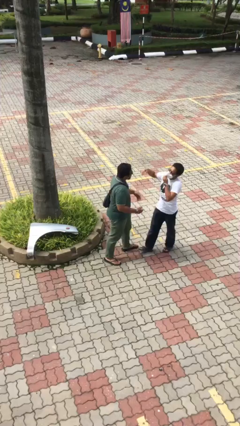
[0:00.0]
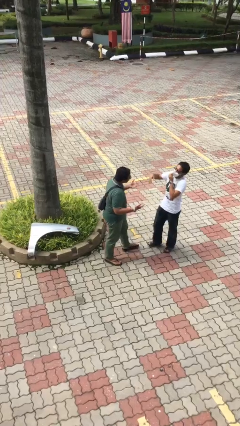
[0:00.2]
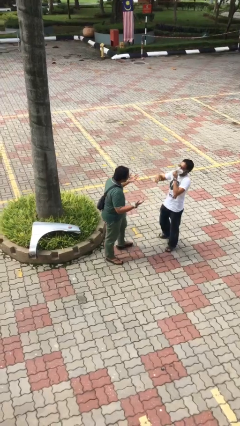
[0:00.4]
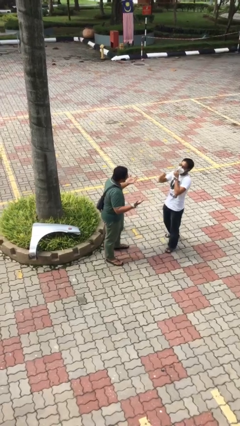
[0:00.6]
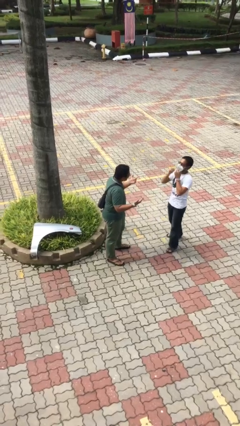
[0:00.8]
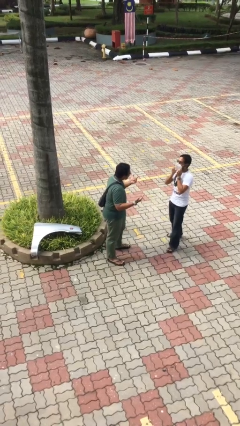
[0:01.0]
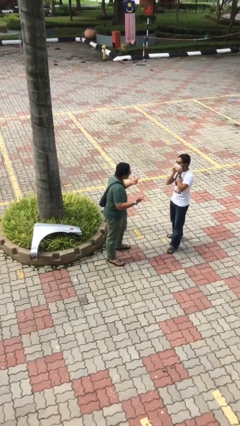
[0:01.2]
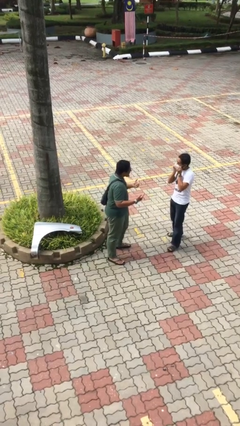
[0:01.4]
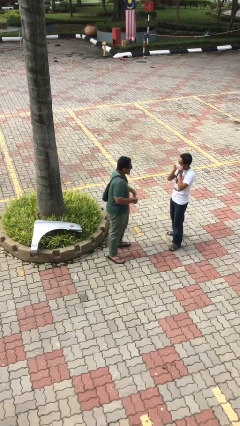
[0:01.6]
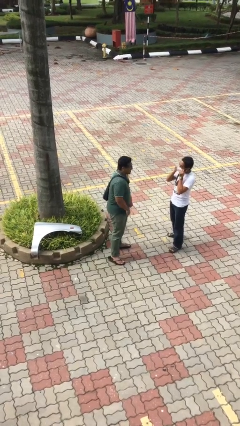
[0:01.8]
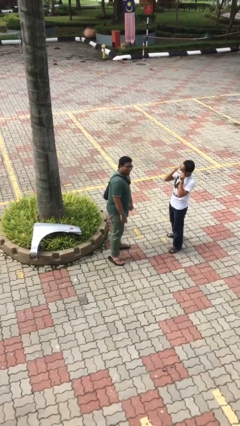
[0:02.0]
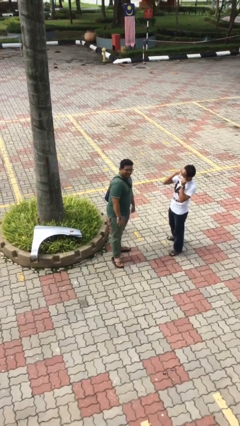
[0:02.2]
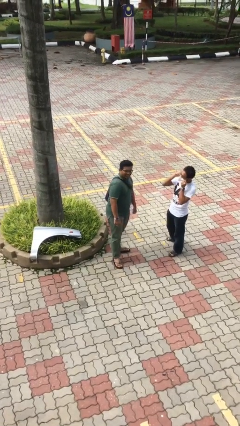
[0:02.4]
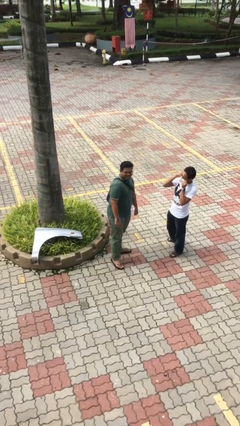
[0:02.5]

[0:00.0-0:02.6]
person talks to person

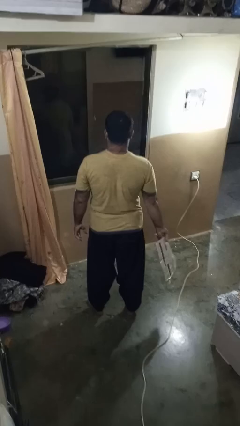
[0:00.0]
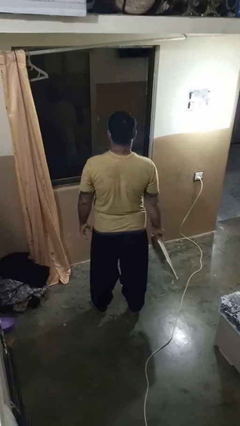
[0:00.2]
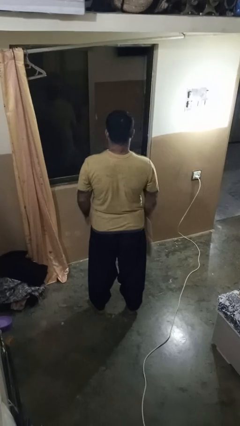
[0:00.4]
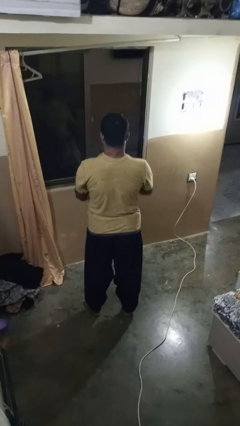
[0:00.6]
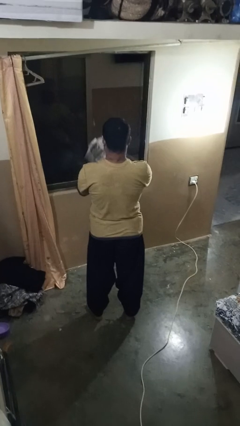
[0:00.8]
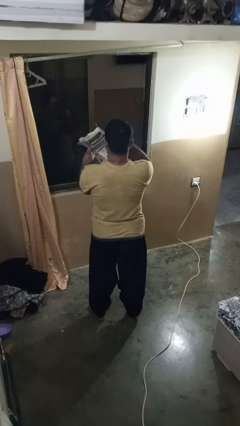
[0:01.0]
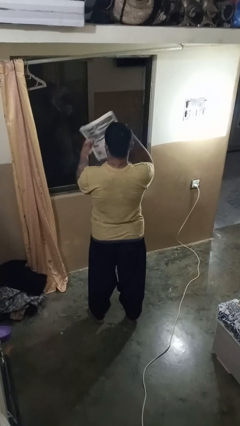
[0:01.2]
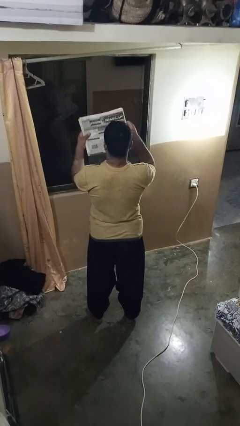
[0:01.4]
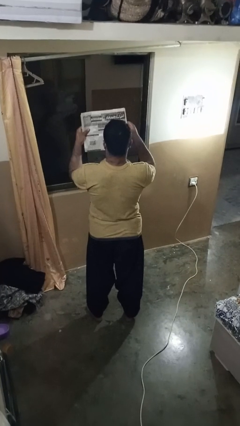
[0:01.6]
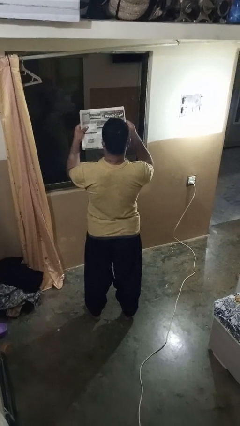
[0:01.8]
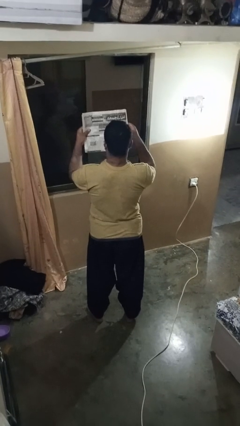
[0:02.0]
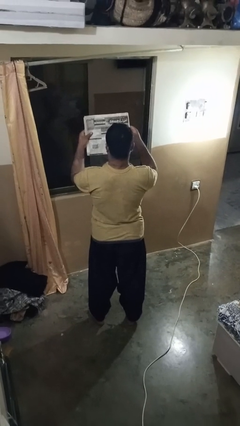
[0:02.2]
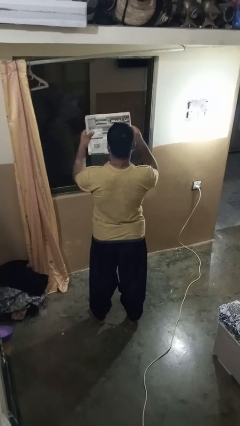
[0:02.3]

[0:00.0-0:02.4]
person reads newspaper

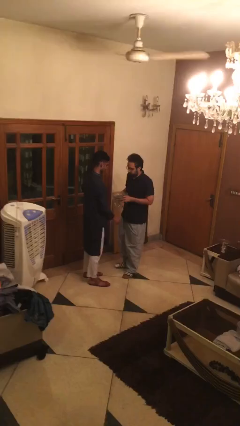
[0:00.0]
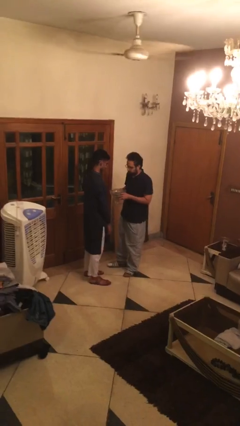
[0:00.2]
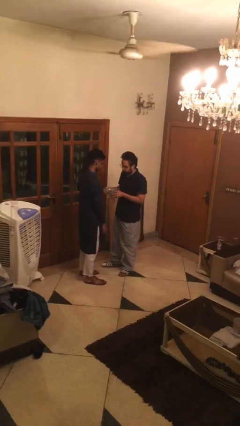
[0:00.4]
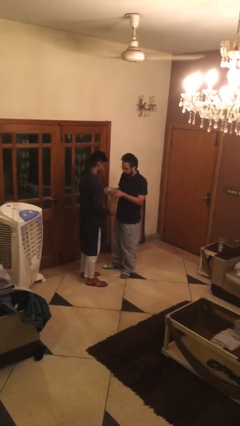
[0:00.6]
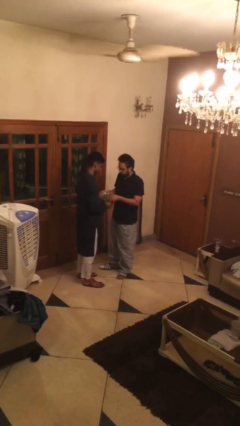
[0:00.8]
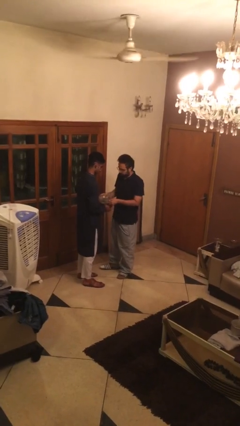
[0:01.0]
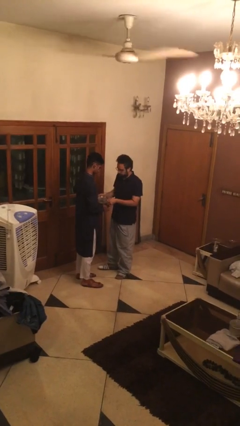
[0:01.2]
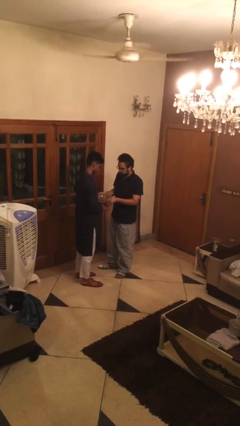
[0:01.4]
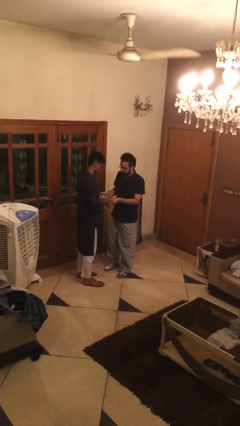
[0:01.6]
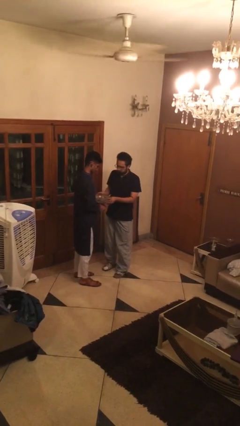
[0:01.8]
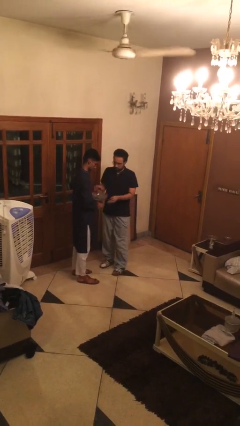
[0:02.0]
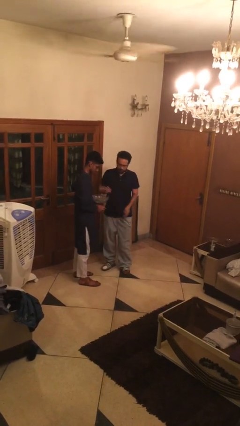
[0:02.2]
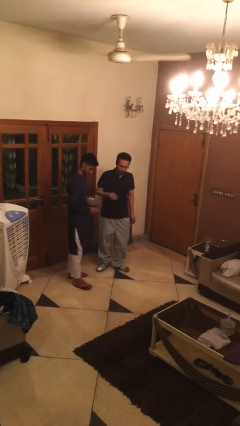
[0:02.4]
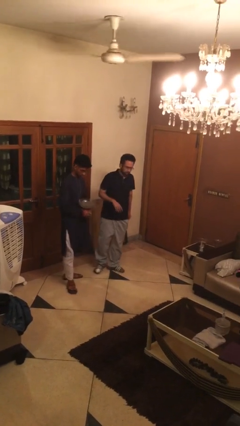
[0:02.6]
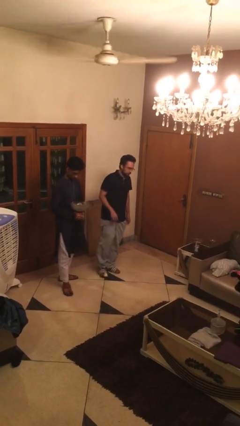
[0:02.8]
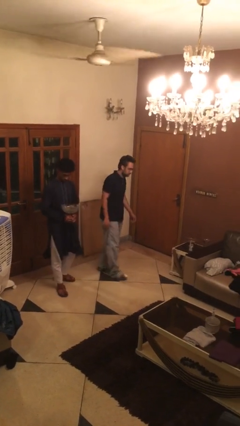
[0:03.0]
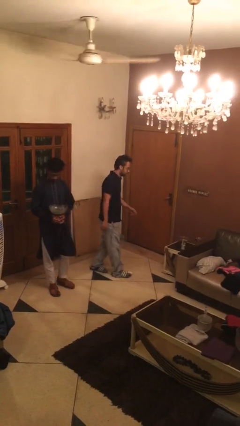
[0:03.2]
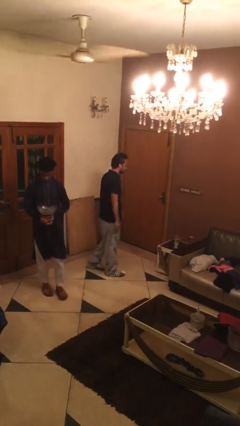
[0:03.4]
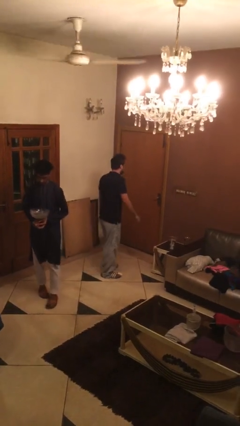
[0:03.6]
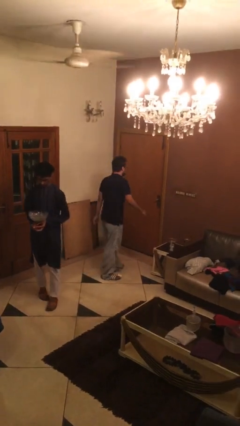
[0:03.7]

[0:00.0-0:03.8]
person transfers object to person

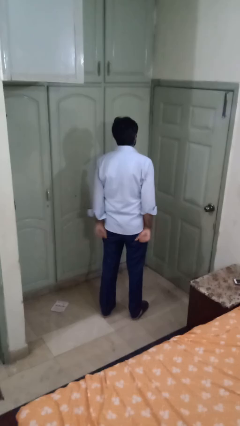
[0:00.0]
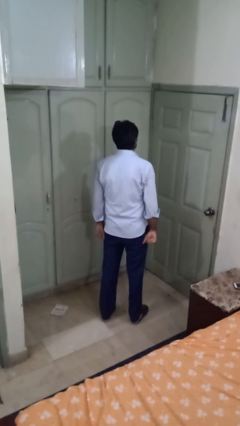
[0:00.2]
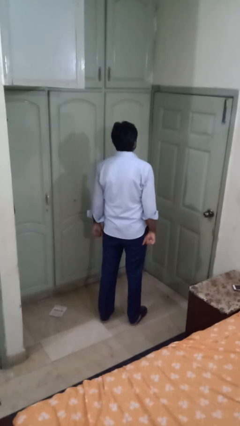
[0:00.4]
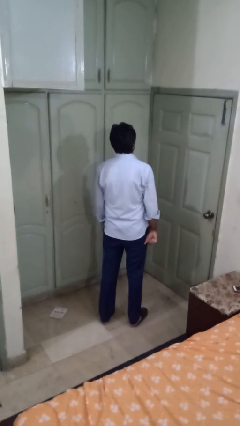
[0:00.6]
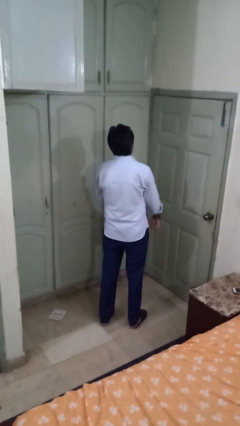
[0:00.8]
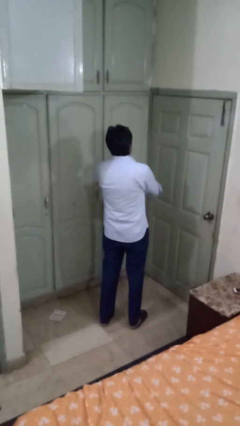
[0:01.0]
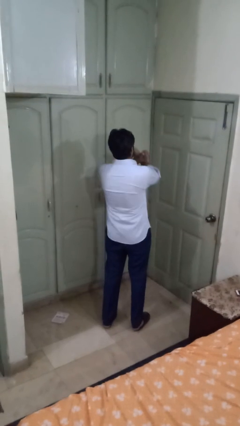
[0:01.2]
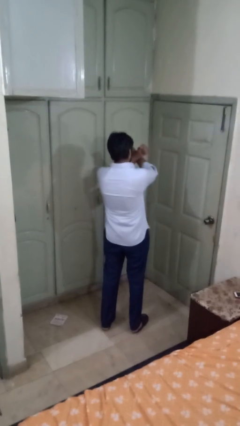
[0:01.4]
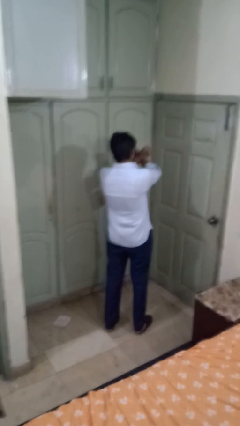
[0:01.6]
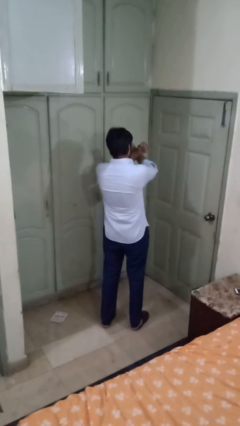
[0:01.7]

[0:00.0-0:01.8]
person gestures arms x

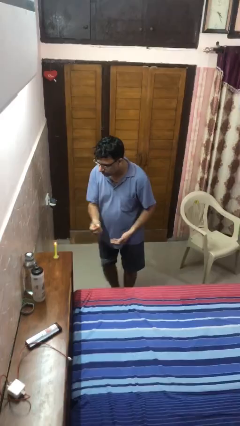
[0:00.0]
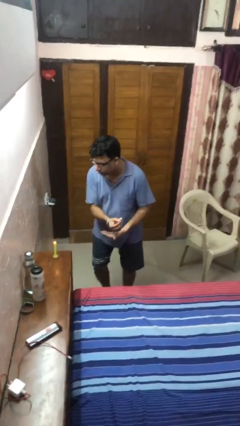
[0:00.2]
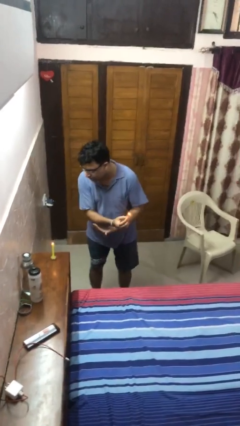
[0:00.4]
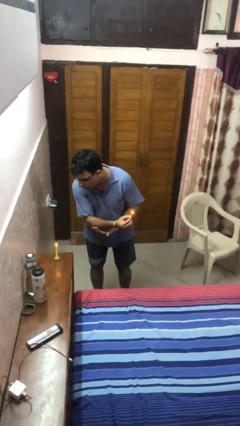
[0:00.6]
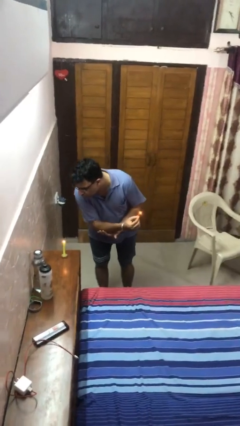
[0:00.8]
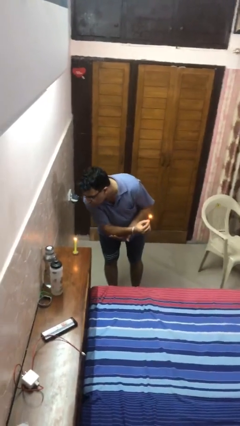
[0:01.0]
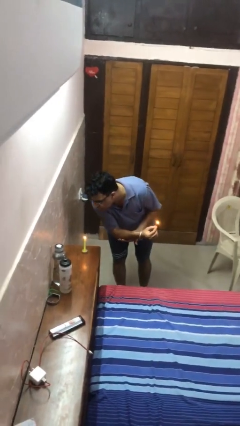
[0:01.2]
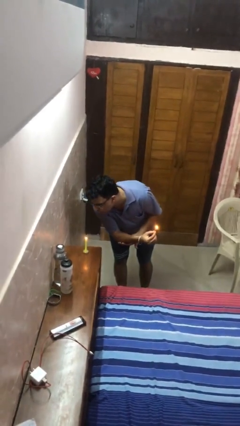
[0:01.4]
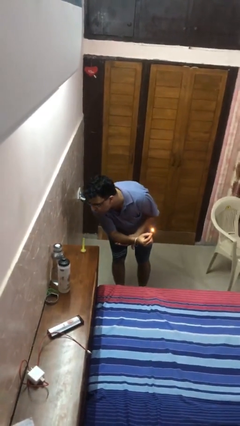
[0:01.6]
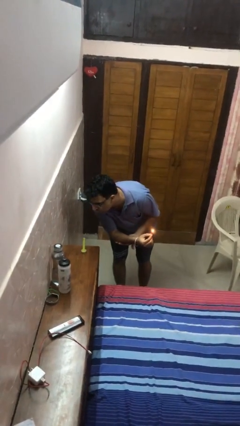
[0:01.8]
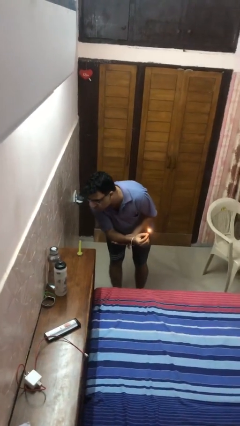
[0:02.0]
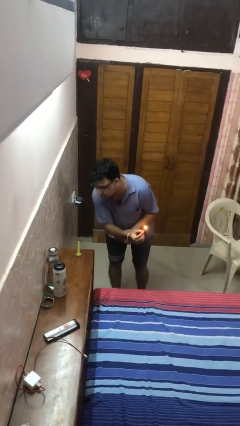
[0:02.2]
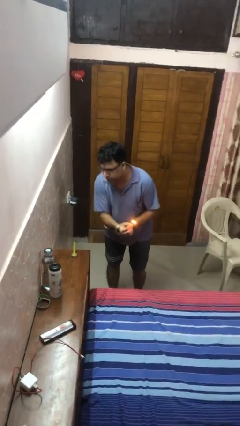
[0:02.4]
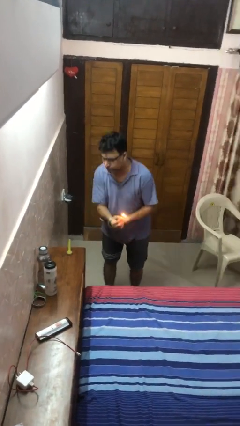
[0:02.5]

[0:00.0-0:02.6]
person extinguishes candle

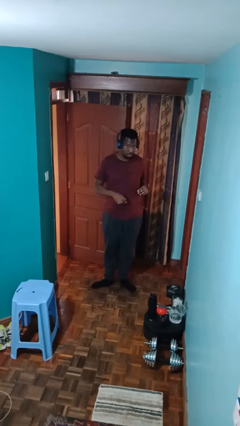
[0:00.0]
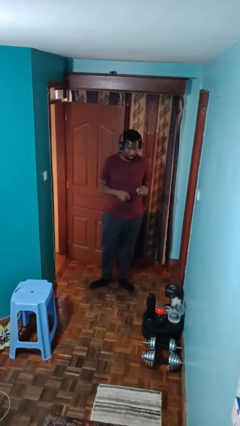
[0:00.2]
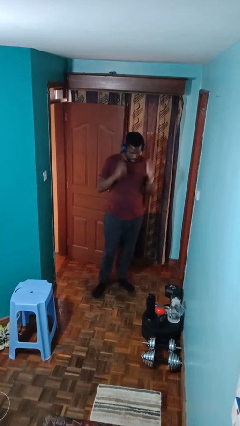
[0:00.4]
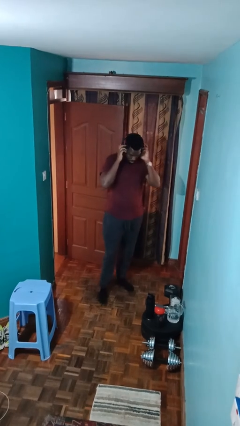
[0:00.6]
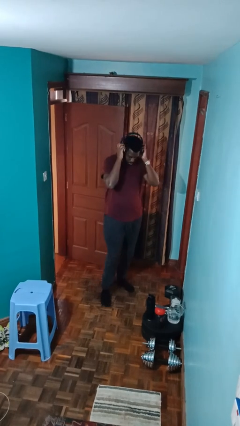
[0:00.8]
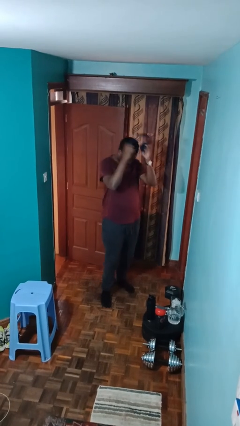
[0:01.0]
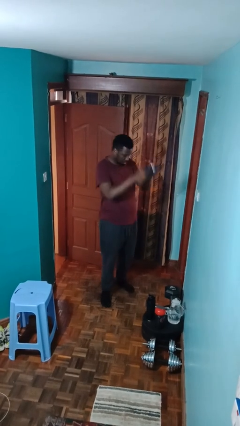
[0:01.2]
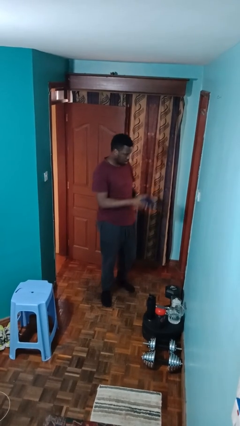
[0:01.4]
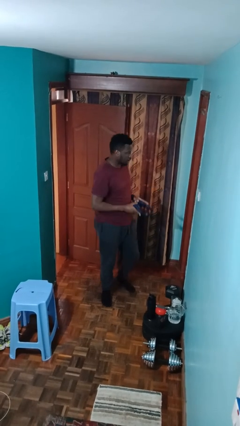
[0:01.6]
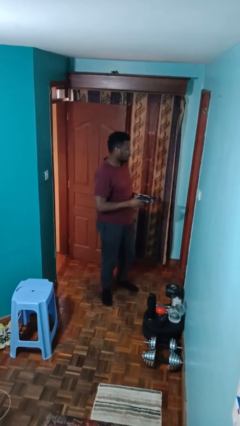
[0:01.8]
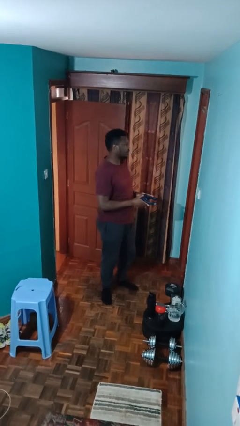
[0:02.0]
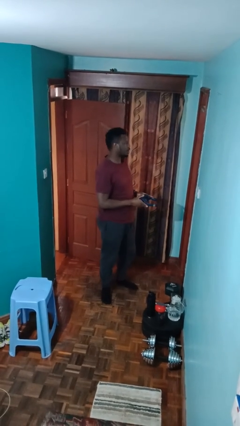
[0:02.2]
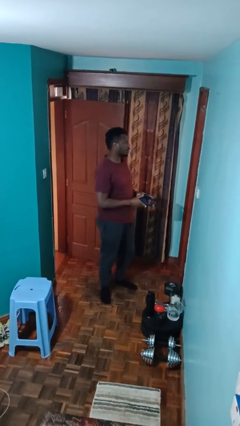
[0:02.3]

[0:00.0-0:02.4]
person takes off headphones

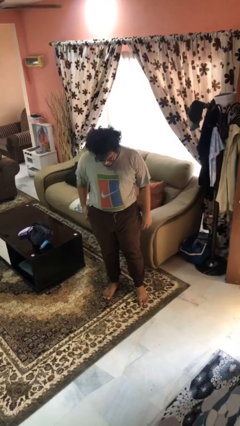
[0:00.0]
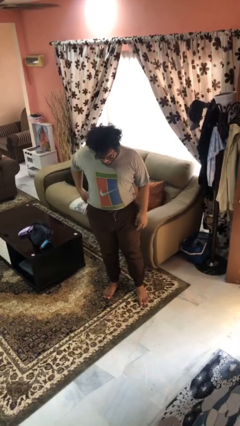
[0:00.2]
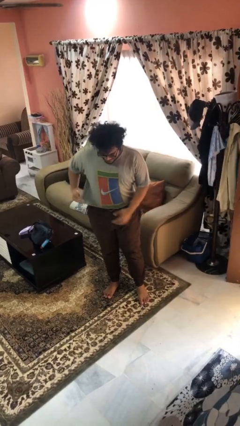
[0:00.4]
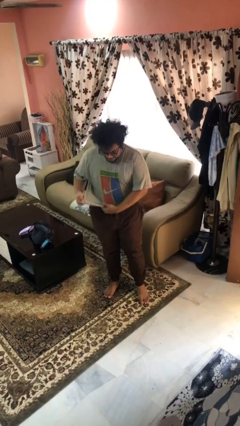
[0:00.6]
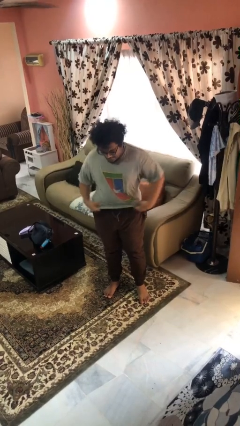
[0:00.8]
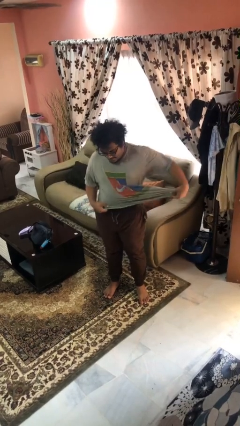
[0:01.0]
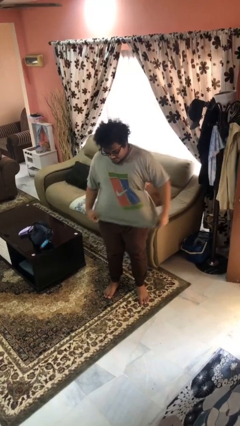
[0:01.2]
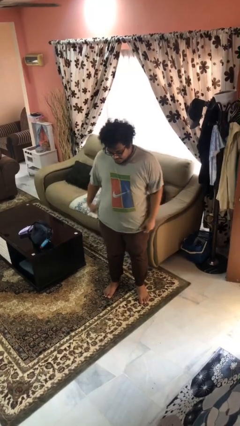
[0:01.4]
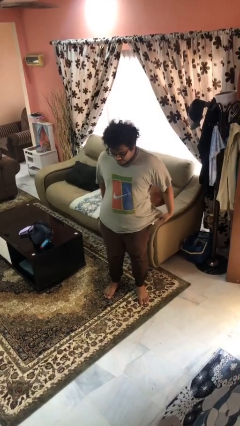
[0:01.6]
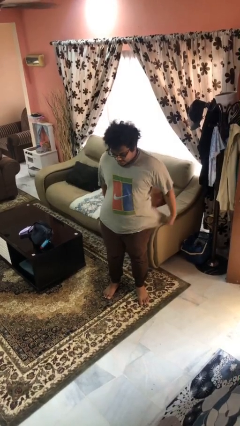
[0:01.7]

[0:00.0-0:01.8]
person untucks shirt
